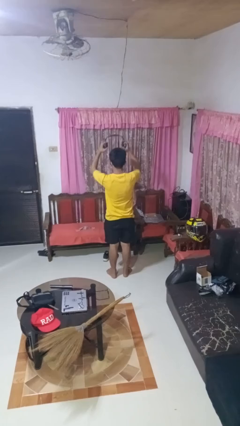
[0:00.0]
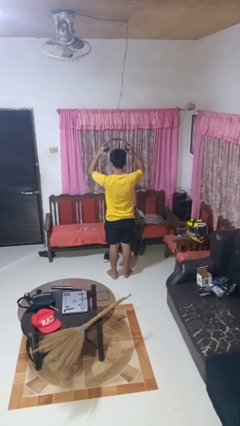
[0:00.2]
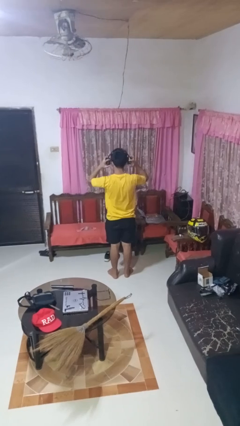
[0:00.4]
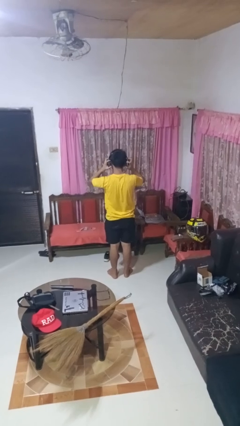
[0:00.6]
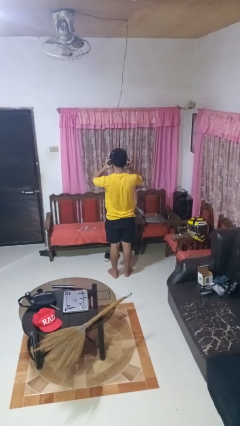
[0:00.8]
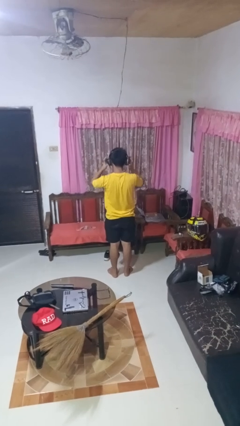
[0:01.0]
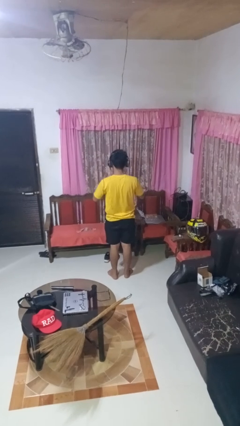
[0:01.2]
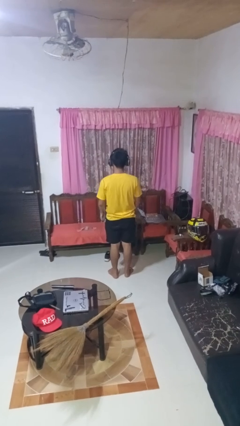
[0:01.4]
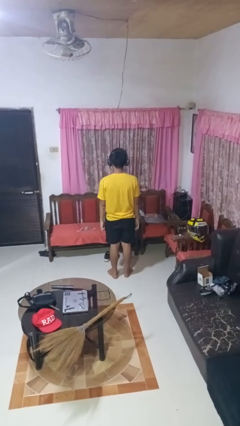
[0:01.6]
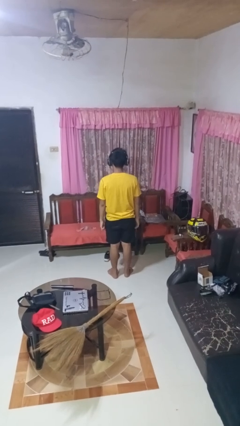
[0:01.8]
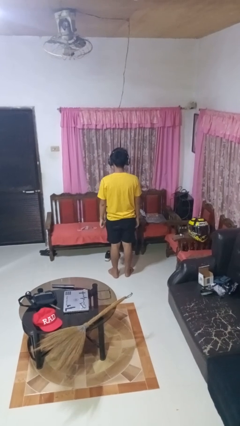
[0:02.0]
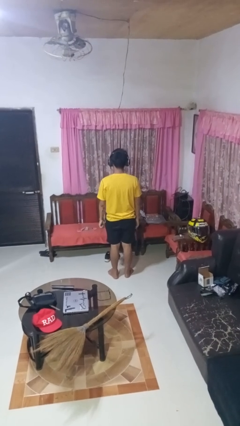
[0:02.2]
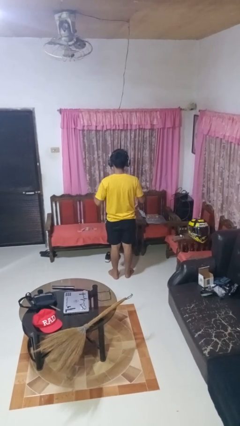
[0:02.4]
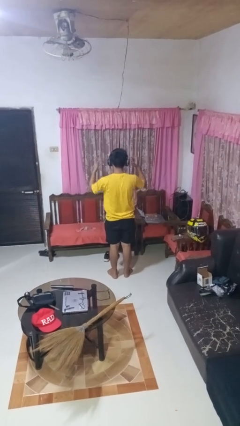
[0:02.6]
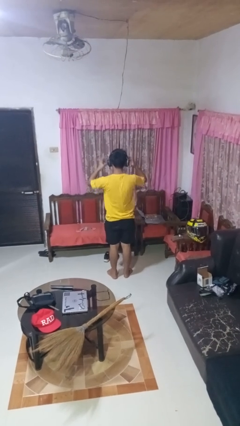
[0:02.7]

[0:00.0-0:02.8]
person puts on headphones

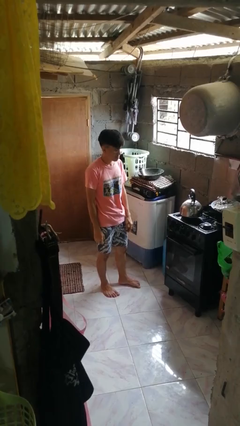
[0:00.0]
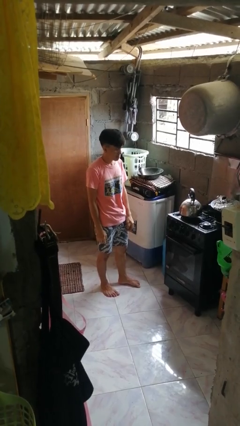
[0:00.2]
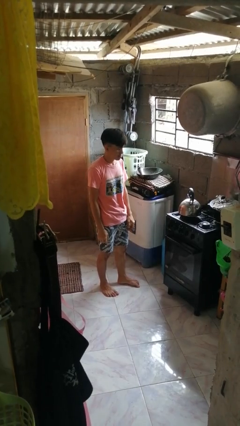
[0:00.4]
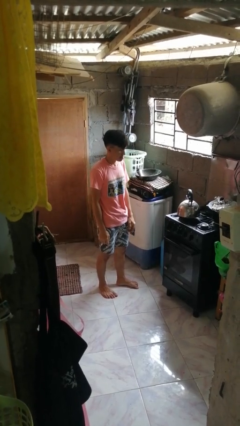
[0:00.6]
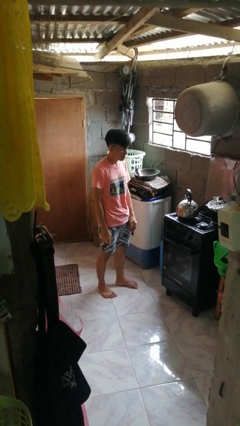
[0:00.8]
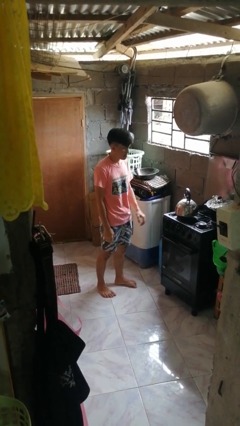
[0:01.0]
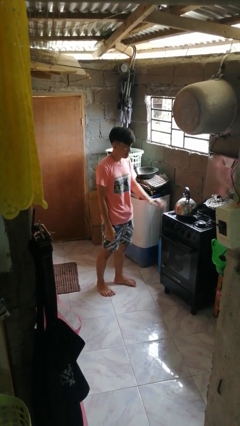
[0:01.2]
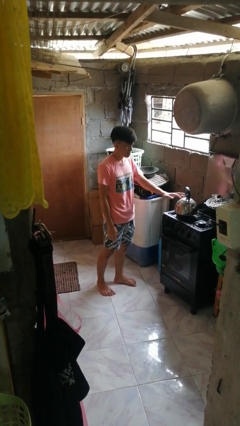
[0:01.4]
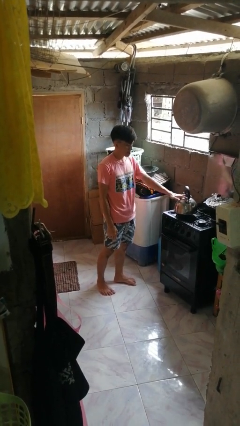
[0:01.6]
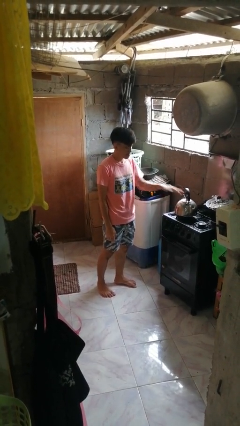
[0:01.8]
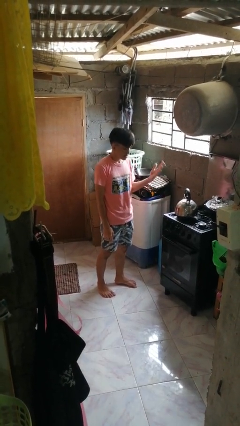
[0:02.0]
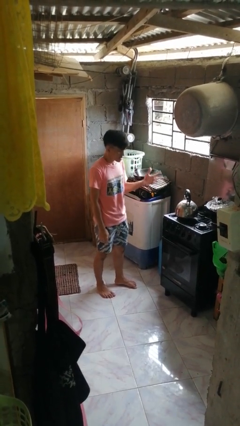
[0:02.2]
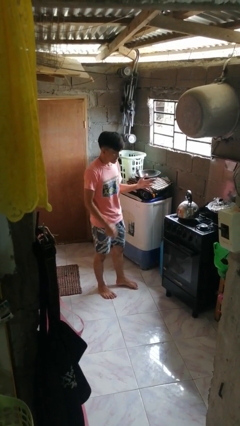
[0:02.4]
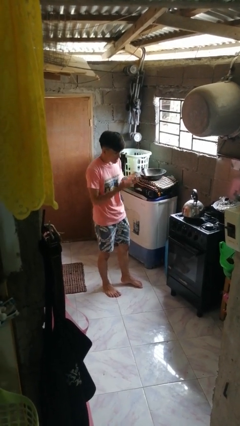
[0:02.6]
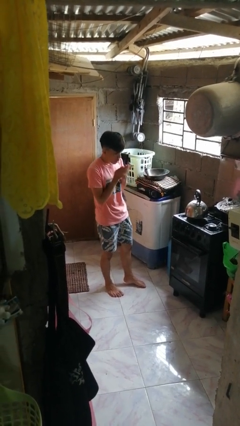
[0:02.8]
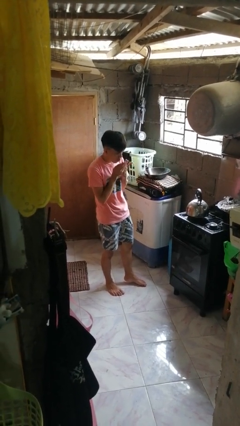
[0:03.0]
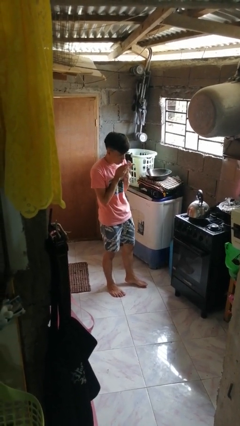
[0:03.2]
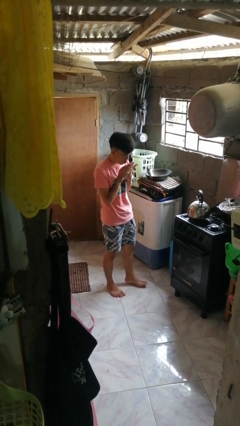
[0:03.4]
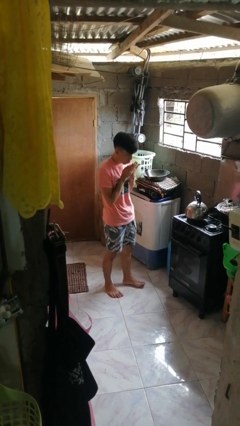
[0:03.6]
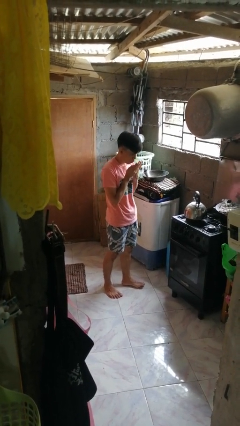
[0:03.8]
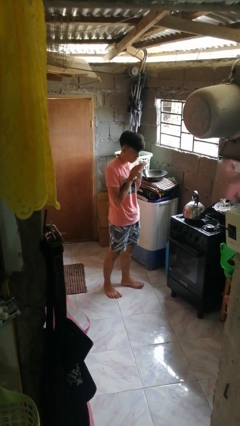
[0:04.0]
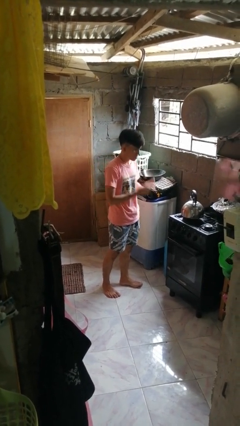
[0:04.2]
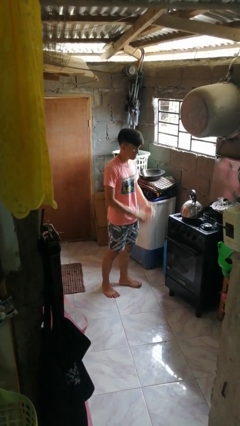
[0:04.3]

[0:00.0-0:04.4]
person burns hand

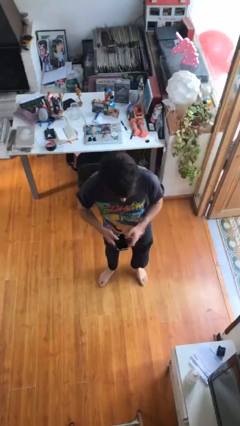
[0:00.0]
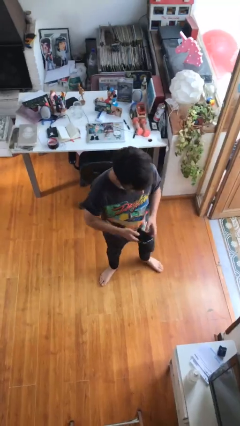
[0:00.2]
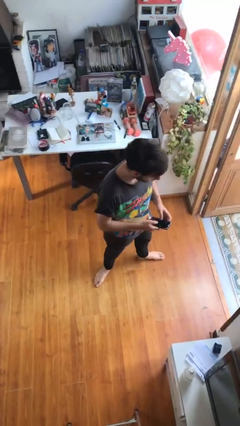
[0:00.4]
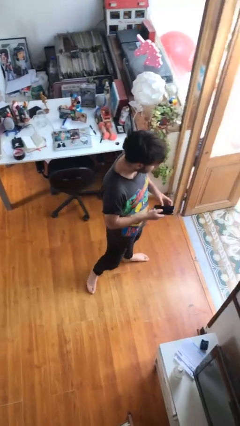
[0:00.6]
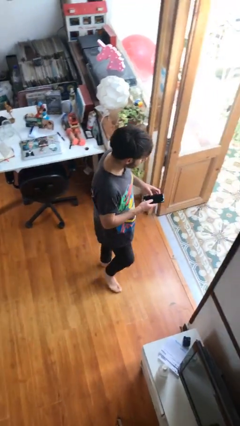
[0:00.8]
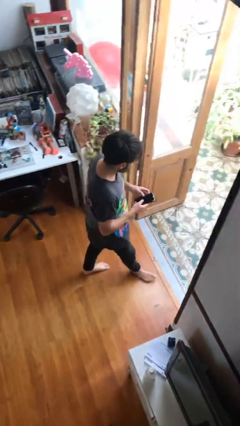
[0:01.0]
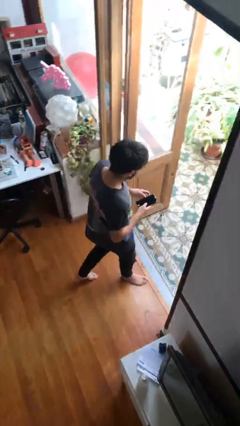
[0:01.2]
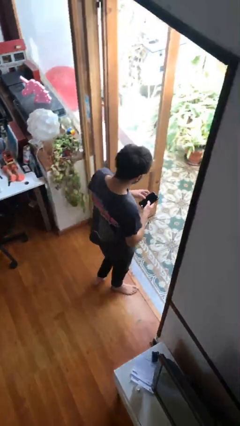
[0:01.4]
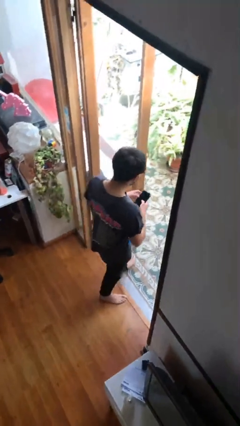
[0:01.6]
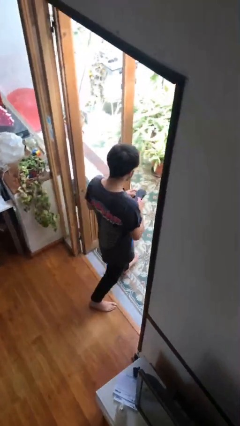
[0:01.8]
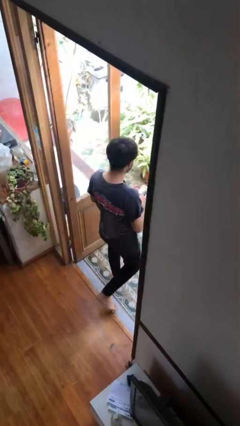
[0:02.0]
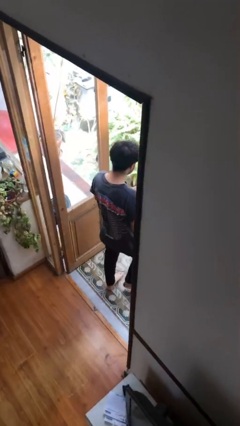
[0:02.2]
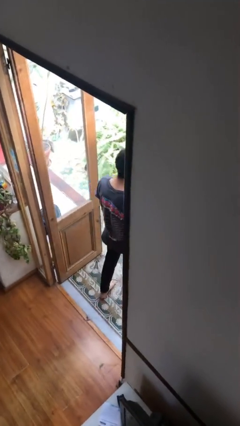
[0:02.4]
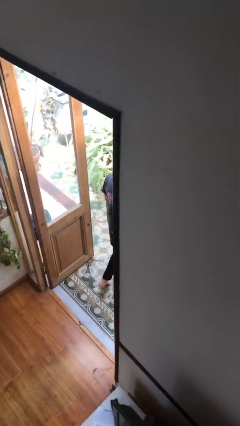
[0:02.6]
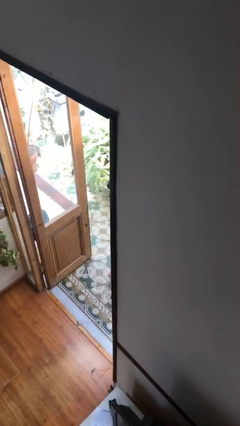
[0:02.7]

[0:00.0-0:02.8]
person exits scene through structure

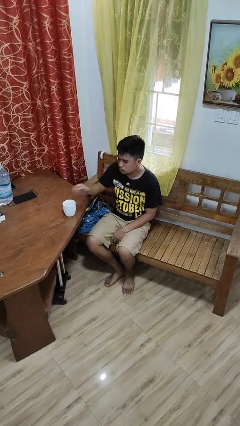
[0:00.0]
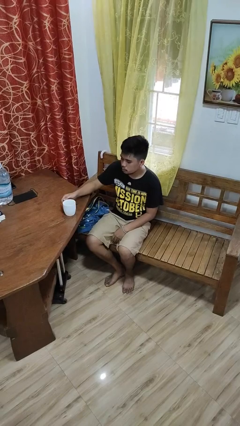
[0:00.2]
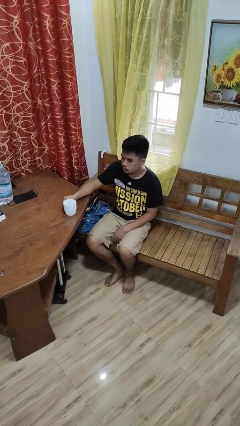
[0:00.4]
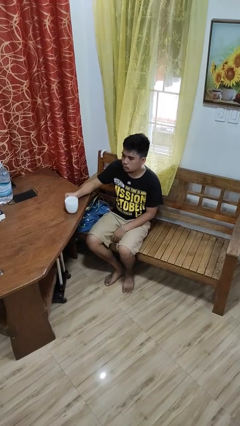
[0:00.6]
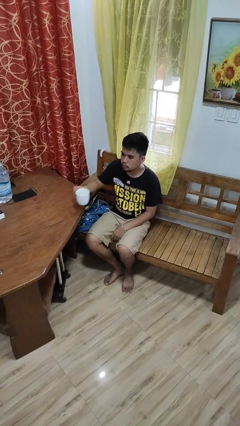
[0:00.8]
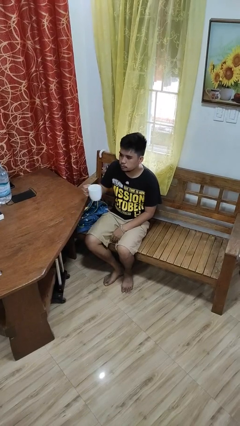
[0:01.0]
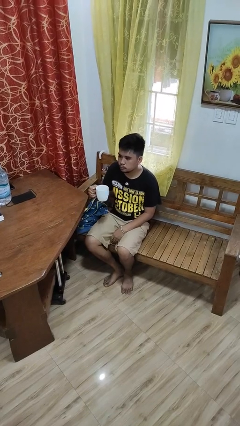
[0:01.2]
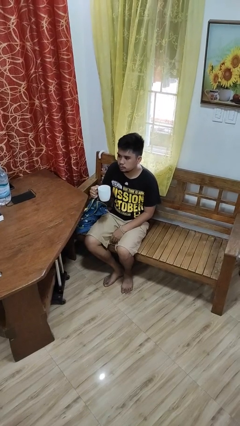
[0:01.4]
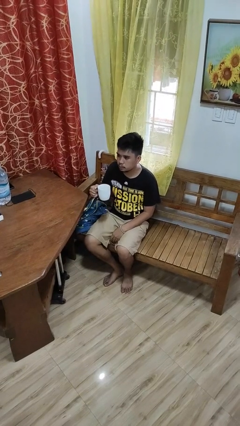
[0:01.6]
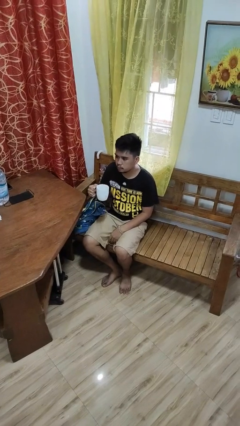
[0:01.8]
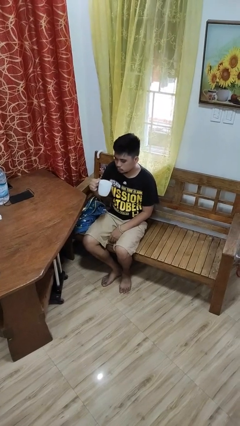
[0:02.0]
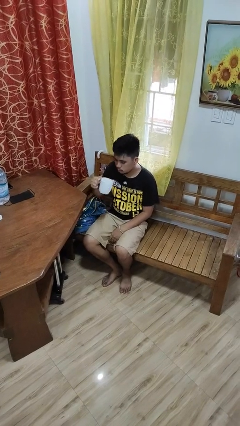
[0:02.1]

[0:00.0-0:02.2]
person picks up object from table

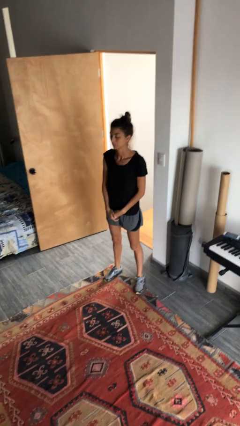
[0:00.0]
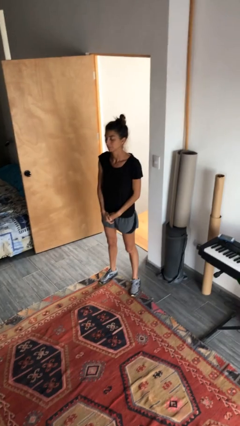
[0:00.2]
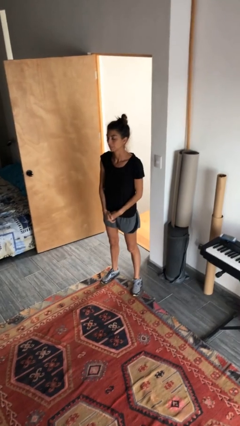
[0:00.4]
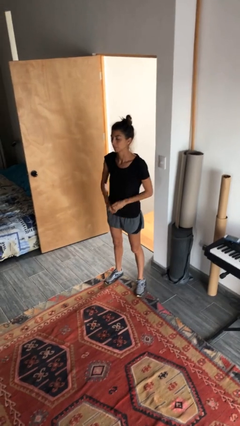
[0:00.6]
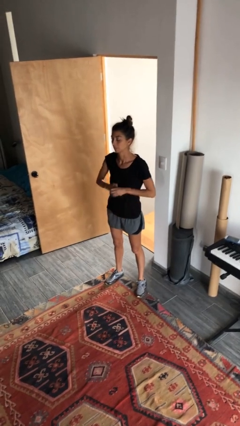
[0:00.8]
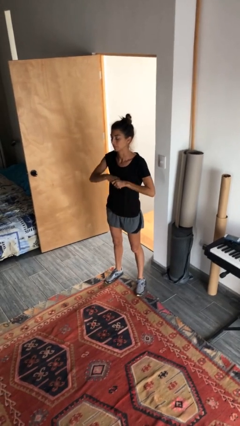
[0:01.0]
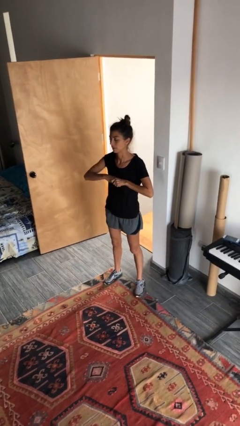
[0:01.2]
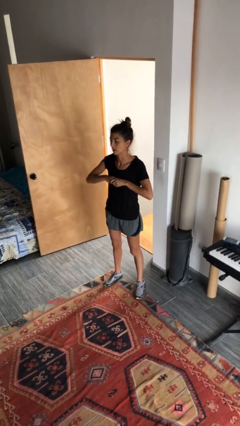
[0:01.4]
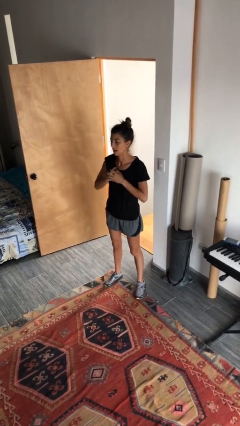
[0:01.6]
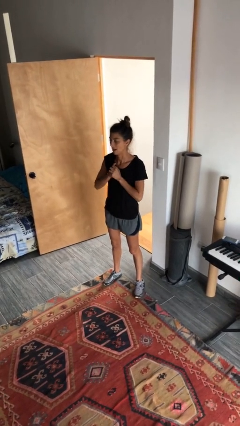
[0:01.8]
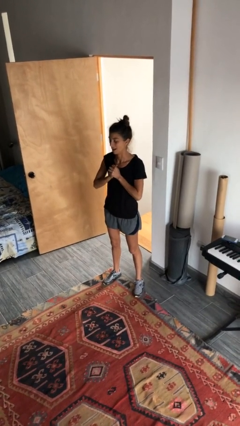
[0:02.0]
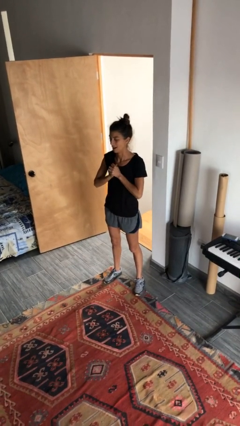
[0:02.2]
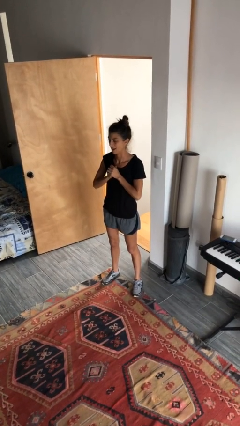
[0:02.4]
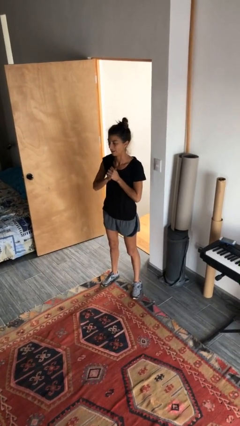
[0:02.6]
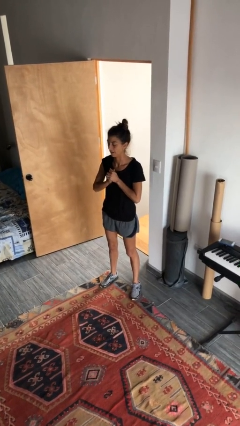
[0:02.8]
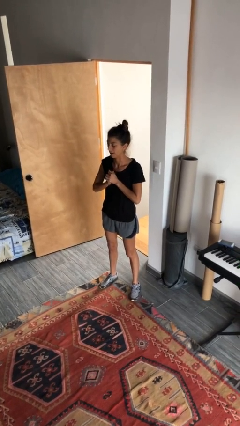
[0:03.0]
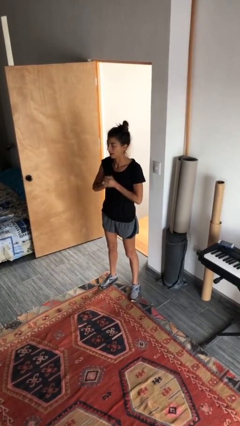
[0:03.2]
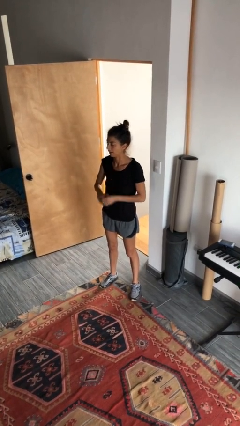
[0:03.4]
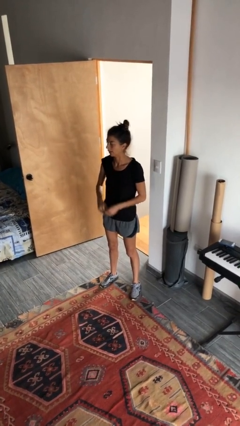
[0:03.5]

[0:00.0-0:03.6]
person cracks knuckles

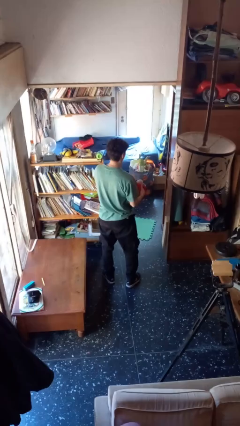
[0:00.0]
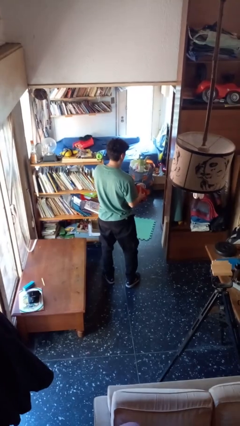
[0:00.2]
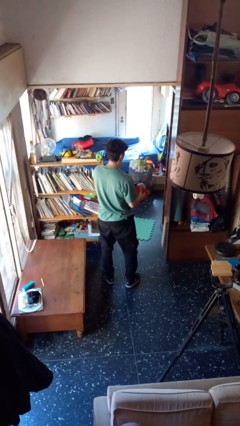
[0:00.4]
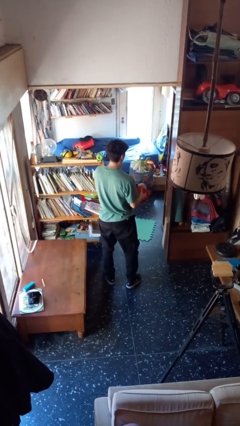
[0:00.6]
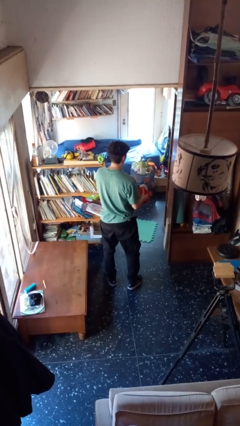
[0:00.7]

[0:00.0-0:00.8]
person catches dropped object

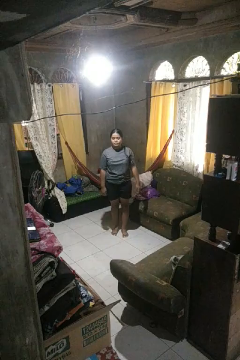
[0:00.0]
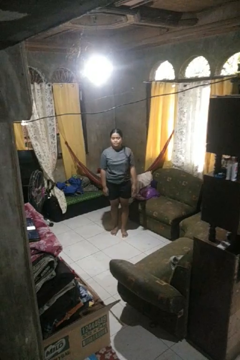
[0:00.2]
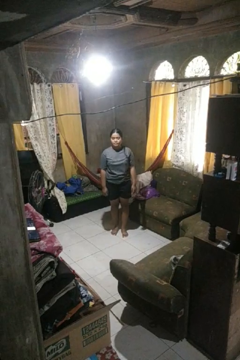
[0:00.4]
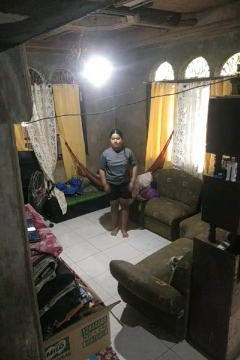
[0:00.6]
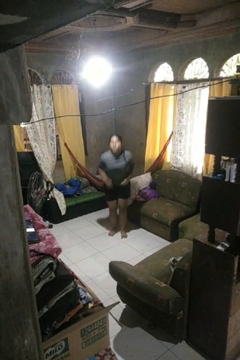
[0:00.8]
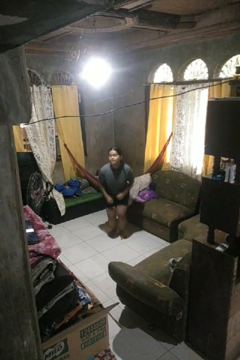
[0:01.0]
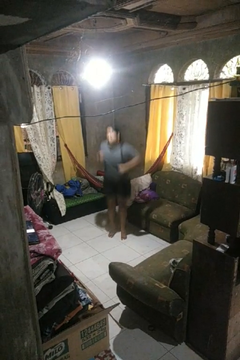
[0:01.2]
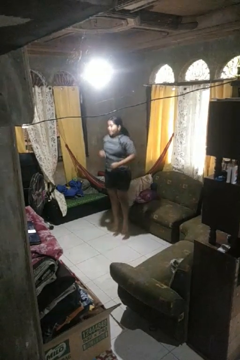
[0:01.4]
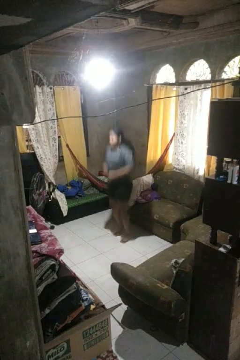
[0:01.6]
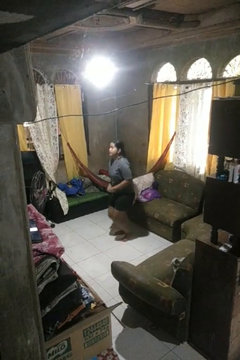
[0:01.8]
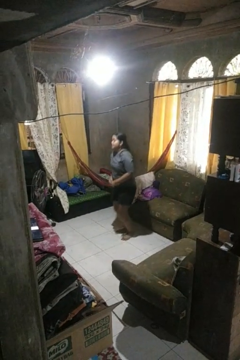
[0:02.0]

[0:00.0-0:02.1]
person jumps
